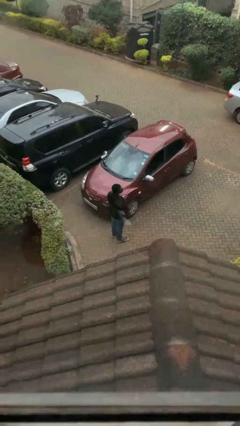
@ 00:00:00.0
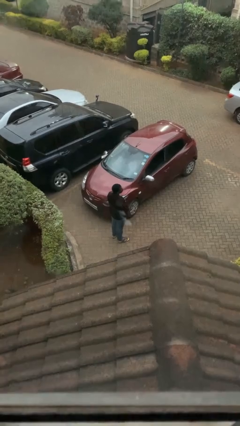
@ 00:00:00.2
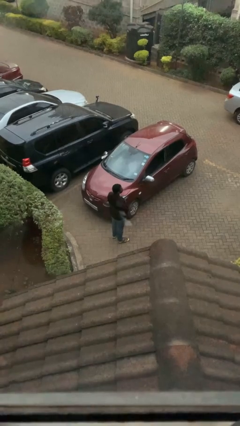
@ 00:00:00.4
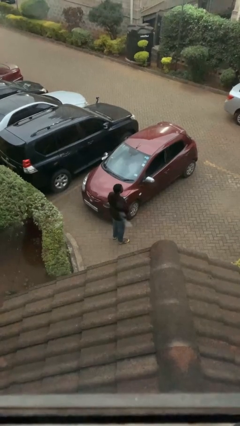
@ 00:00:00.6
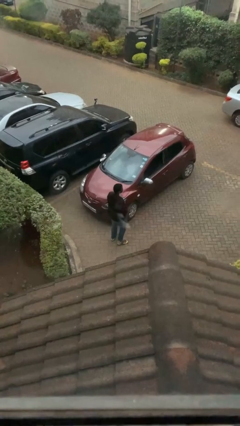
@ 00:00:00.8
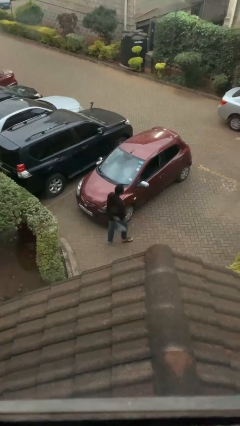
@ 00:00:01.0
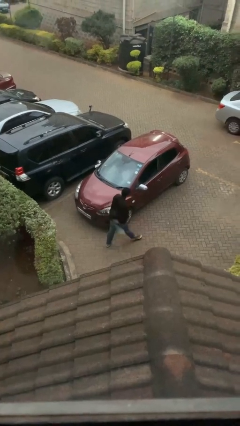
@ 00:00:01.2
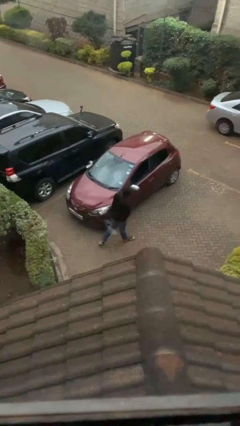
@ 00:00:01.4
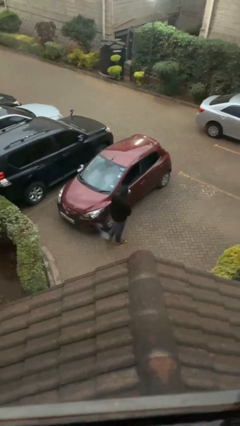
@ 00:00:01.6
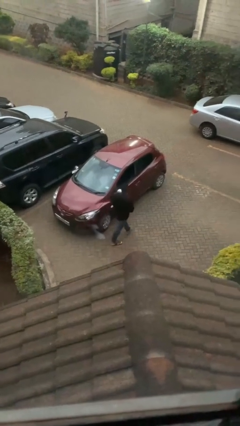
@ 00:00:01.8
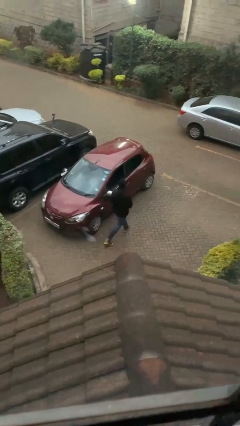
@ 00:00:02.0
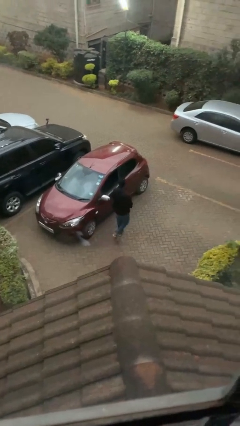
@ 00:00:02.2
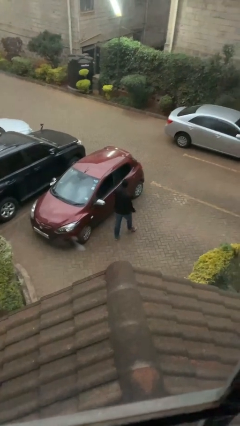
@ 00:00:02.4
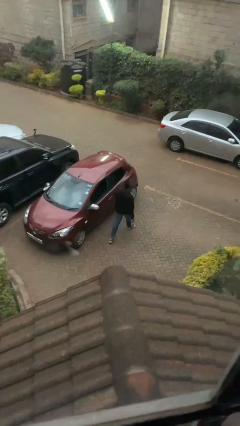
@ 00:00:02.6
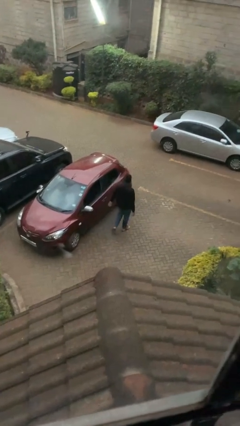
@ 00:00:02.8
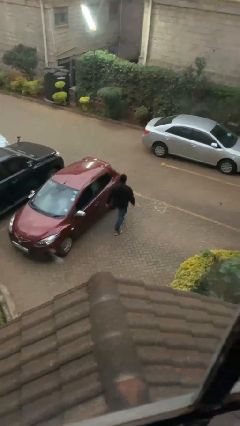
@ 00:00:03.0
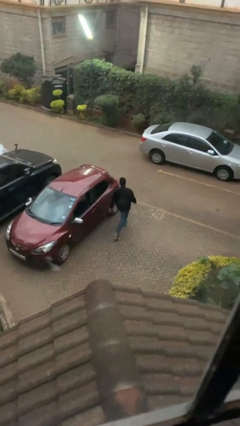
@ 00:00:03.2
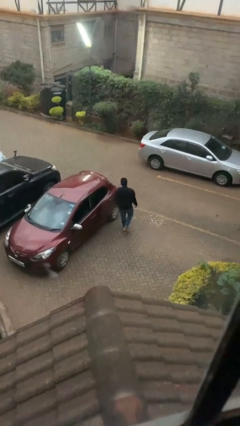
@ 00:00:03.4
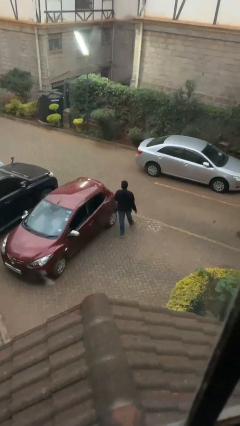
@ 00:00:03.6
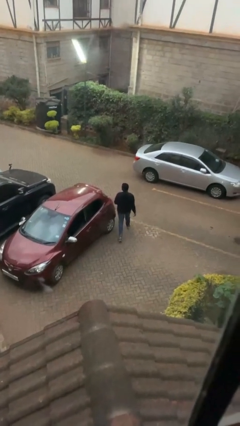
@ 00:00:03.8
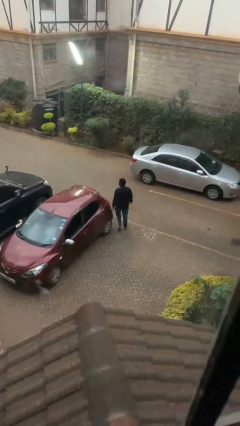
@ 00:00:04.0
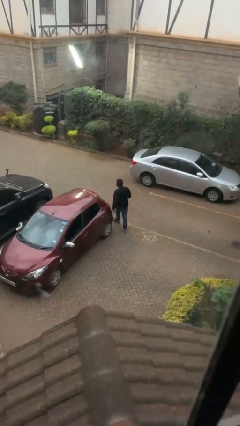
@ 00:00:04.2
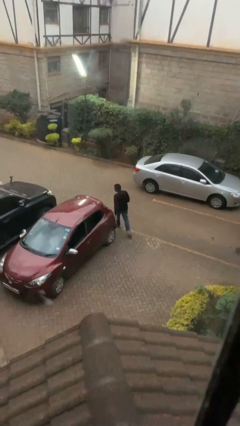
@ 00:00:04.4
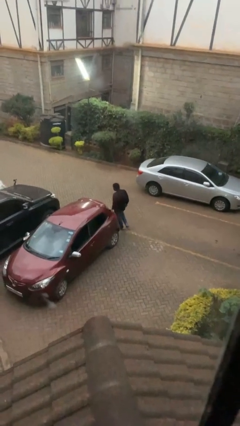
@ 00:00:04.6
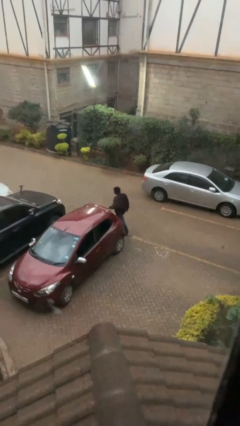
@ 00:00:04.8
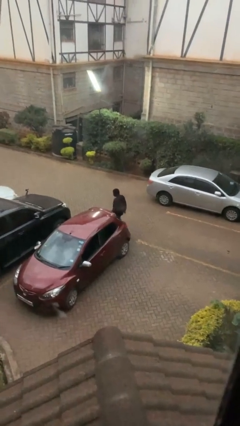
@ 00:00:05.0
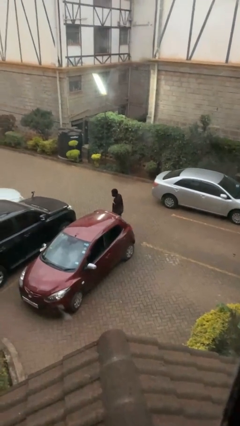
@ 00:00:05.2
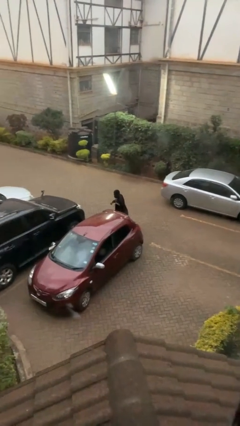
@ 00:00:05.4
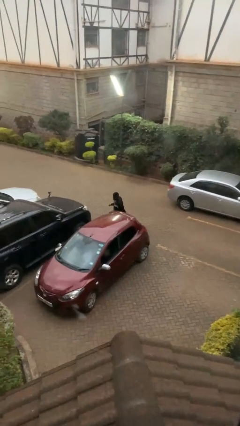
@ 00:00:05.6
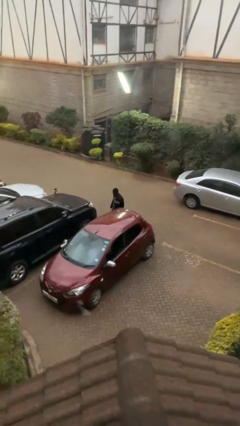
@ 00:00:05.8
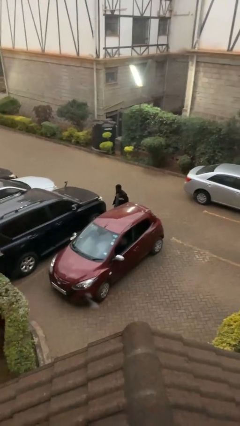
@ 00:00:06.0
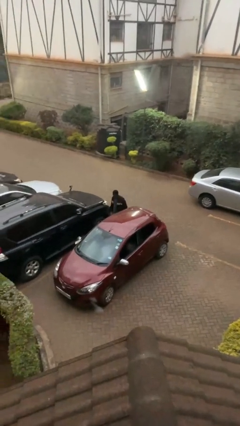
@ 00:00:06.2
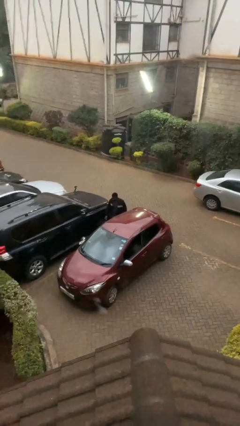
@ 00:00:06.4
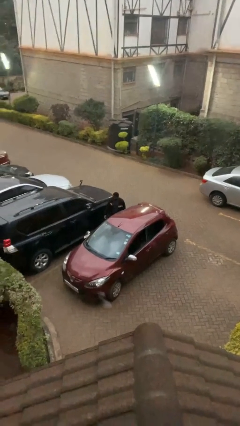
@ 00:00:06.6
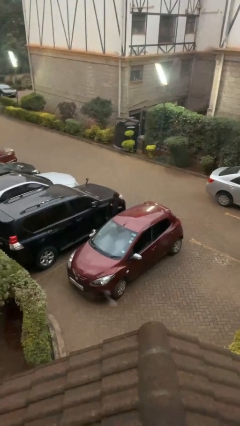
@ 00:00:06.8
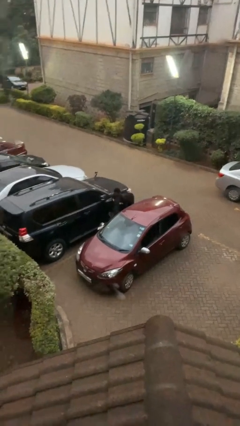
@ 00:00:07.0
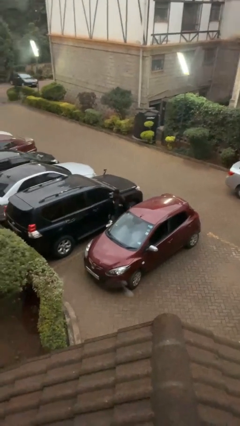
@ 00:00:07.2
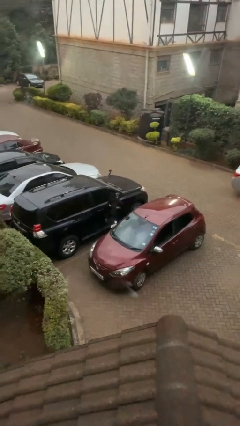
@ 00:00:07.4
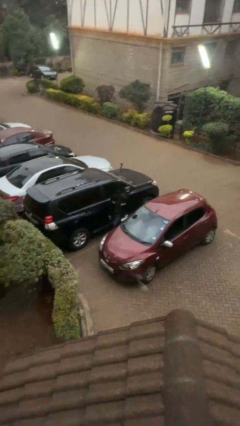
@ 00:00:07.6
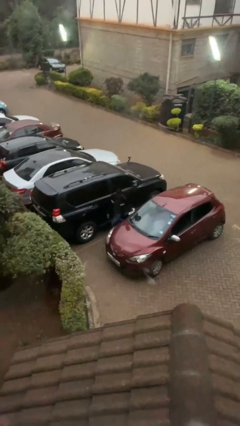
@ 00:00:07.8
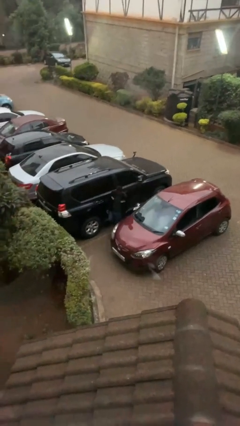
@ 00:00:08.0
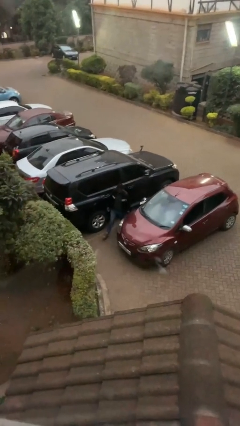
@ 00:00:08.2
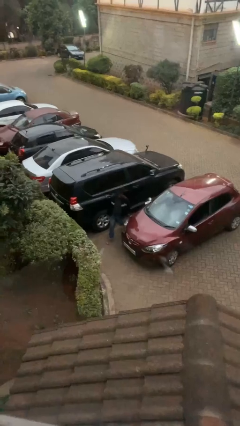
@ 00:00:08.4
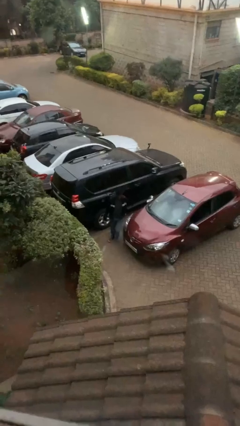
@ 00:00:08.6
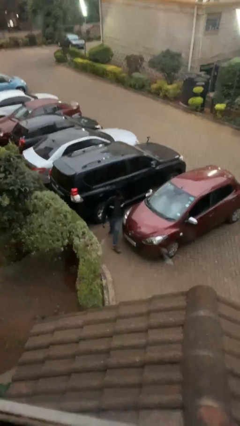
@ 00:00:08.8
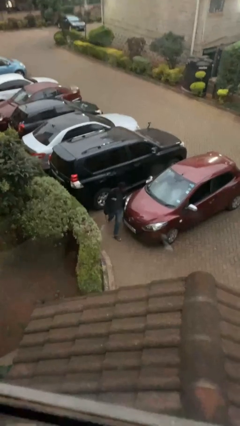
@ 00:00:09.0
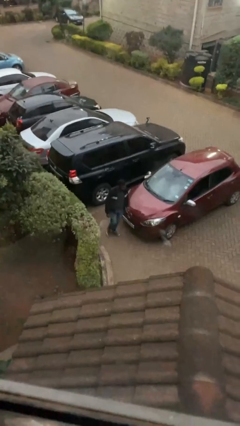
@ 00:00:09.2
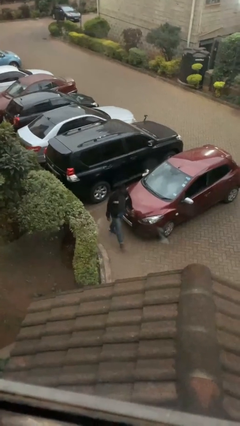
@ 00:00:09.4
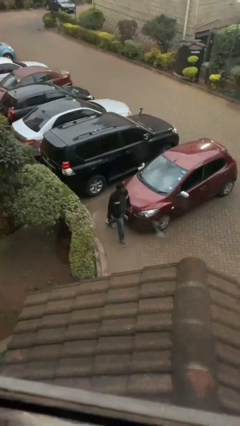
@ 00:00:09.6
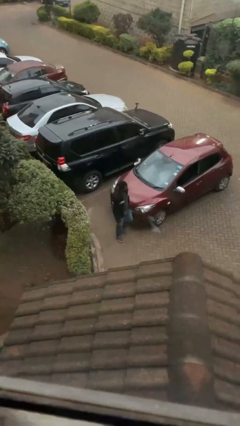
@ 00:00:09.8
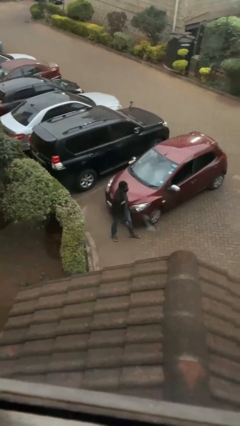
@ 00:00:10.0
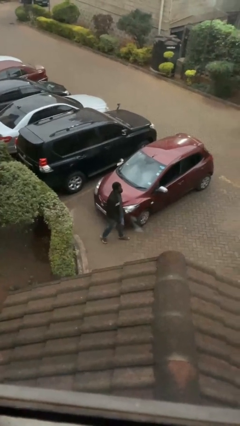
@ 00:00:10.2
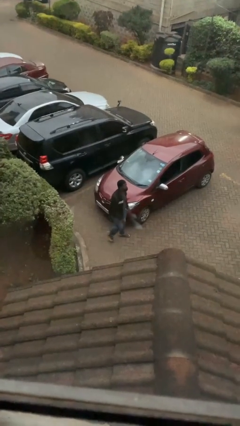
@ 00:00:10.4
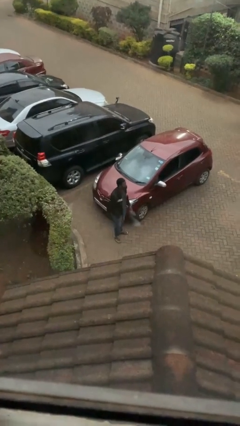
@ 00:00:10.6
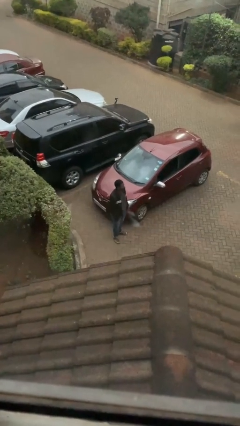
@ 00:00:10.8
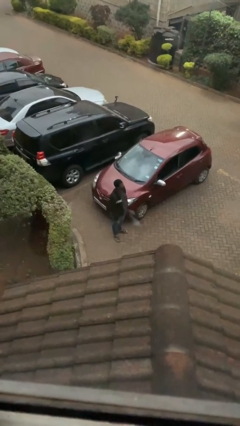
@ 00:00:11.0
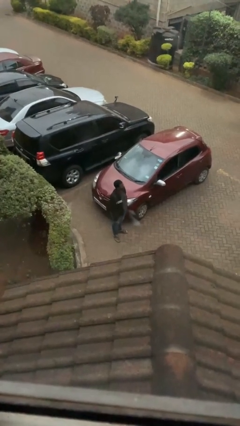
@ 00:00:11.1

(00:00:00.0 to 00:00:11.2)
person walks around car

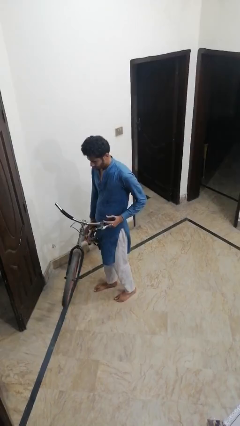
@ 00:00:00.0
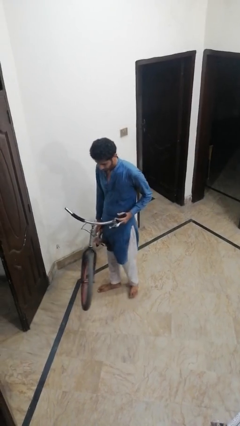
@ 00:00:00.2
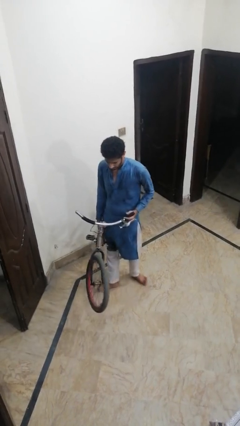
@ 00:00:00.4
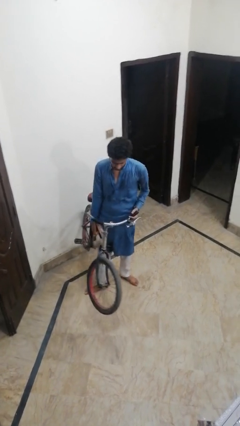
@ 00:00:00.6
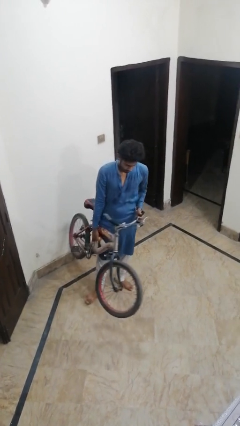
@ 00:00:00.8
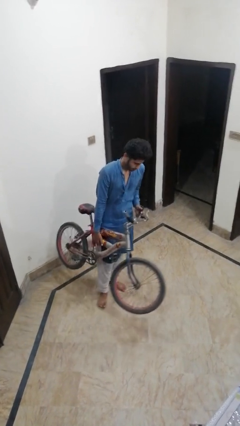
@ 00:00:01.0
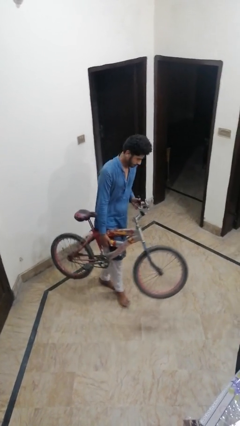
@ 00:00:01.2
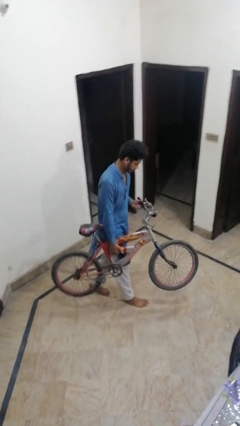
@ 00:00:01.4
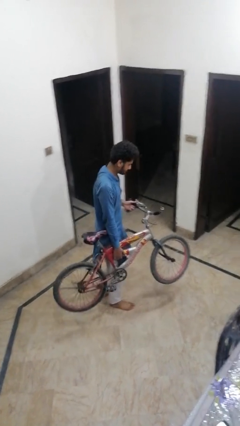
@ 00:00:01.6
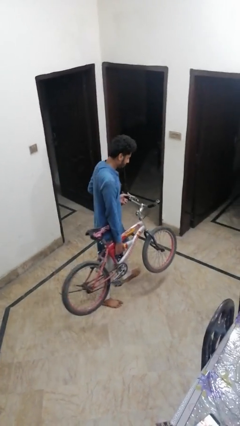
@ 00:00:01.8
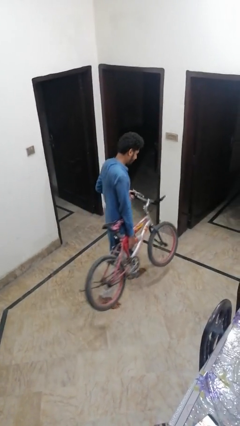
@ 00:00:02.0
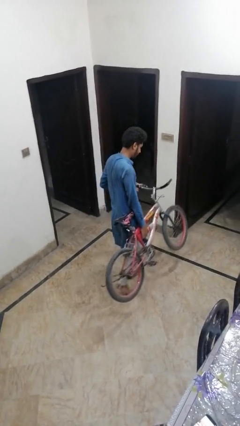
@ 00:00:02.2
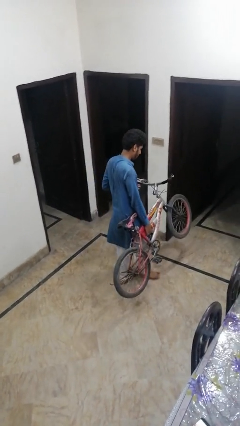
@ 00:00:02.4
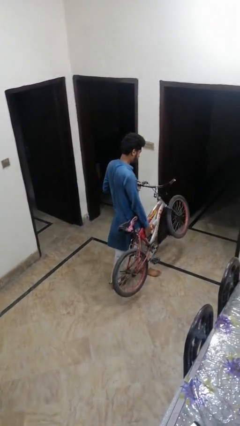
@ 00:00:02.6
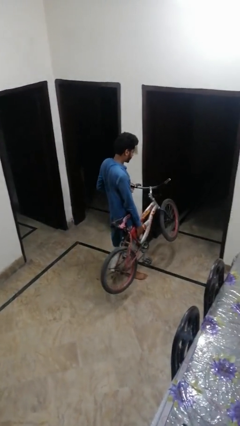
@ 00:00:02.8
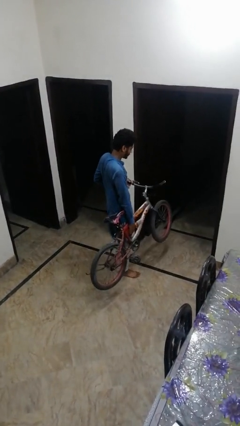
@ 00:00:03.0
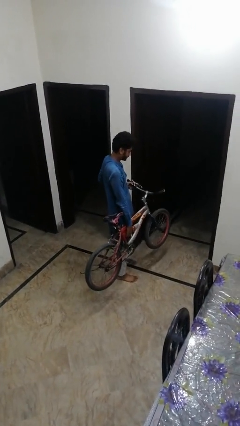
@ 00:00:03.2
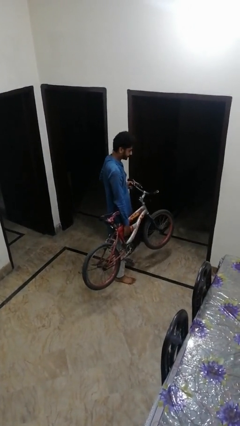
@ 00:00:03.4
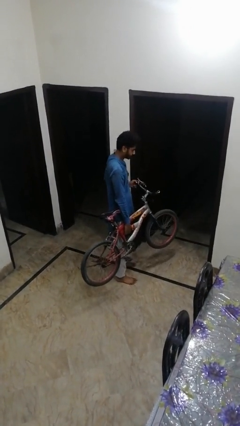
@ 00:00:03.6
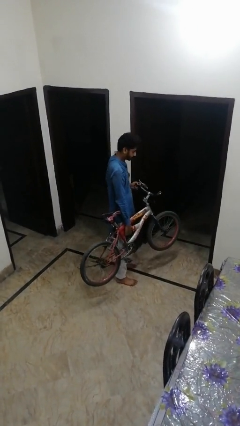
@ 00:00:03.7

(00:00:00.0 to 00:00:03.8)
person carries bicycle

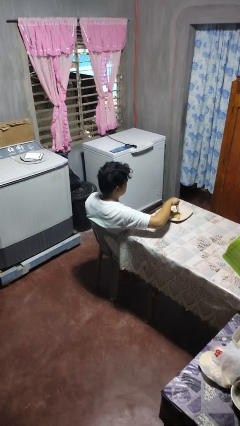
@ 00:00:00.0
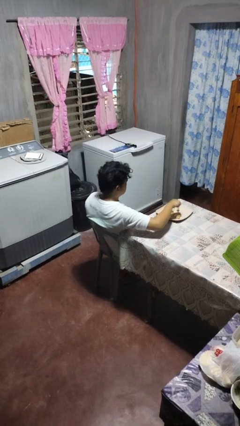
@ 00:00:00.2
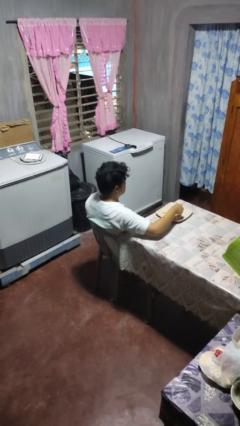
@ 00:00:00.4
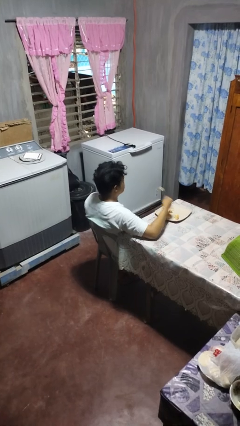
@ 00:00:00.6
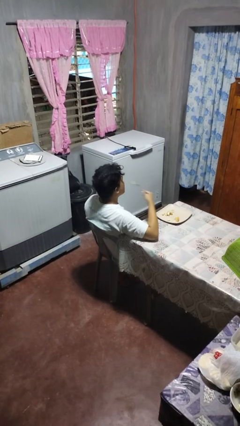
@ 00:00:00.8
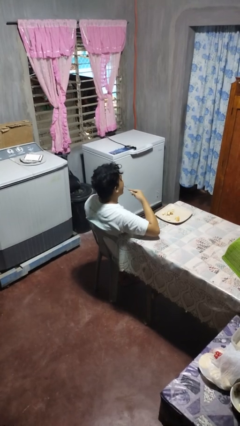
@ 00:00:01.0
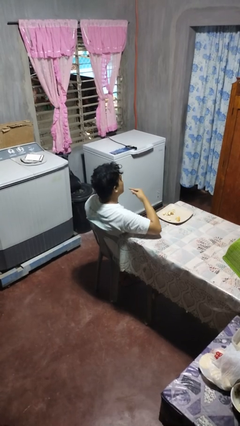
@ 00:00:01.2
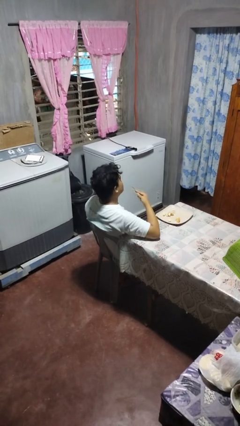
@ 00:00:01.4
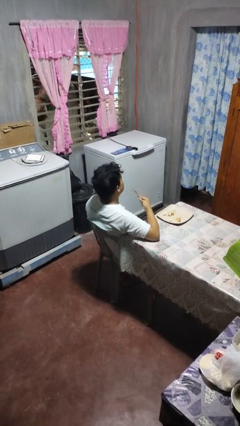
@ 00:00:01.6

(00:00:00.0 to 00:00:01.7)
person eats with utensil

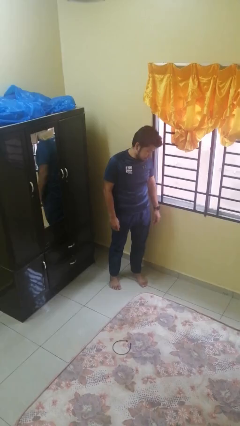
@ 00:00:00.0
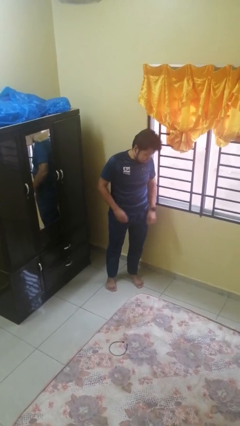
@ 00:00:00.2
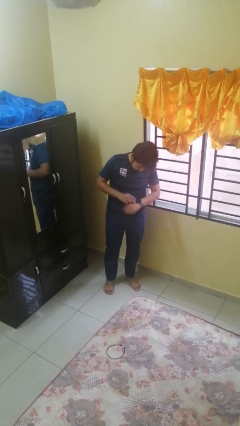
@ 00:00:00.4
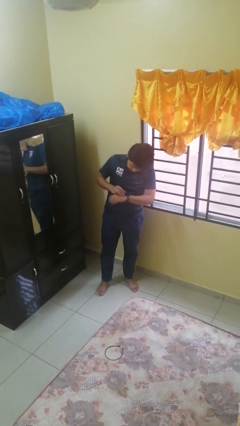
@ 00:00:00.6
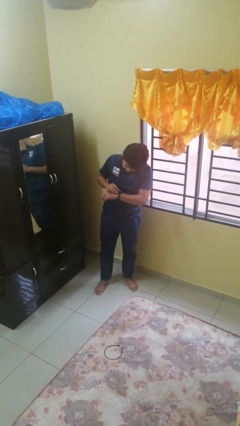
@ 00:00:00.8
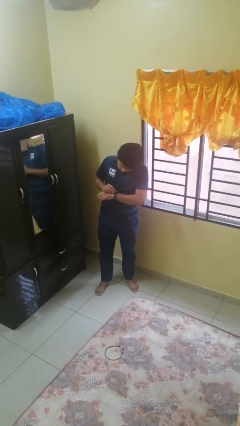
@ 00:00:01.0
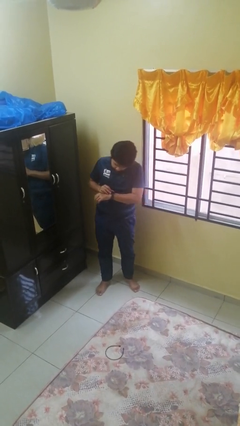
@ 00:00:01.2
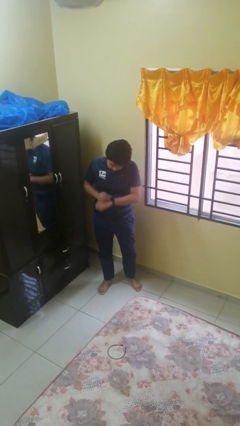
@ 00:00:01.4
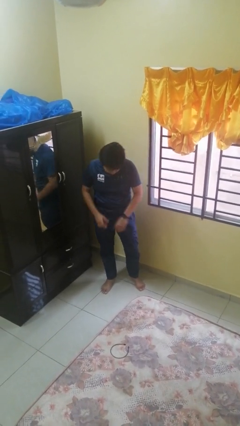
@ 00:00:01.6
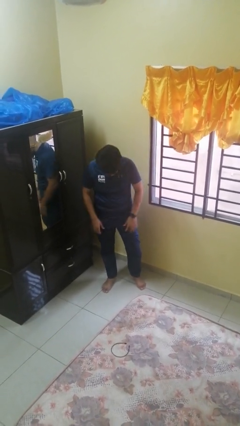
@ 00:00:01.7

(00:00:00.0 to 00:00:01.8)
person looks at wristwatch
